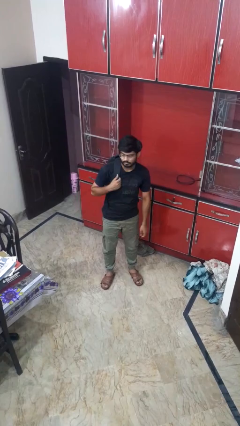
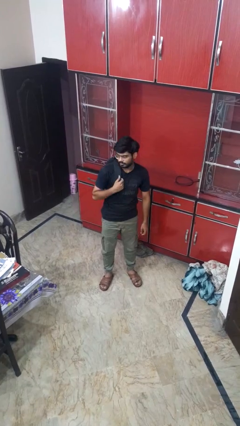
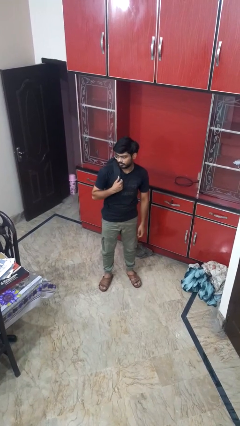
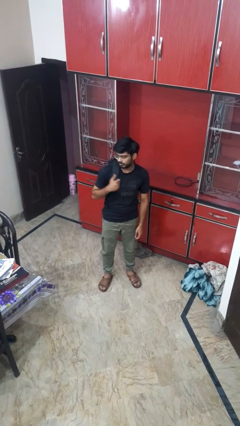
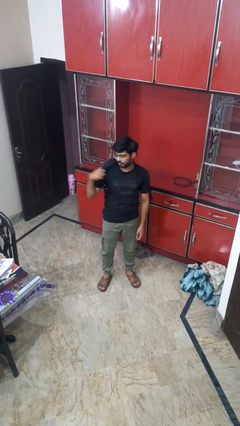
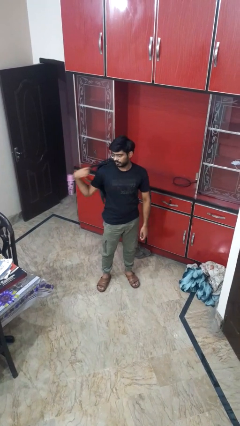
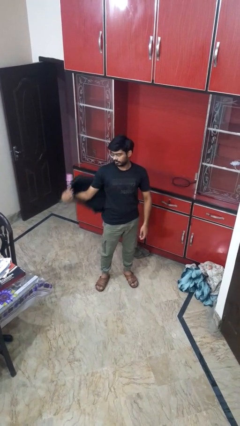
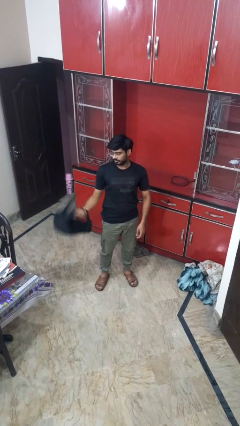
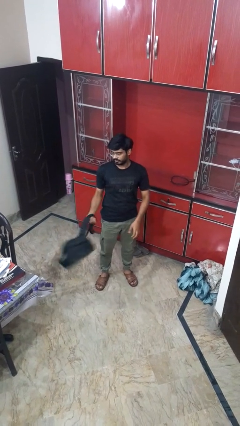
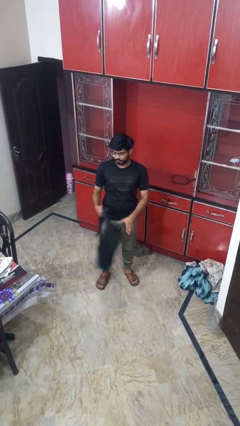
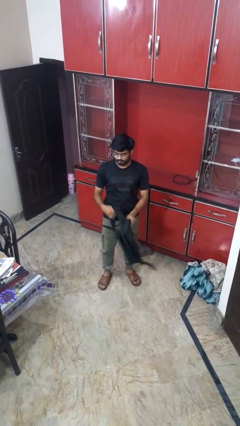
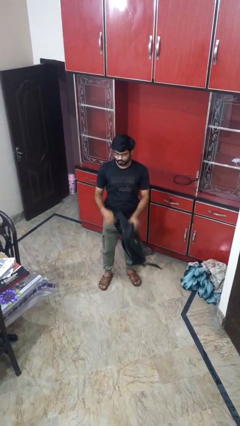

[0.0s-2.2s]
person takes off backpack

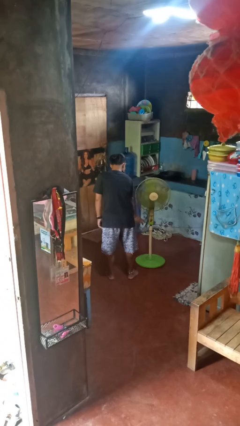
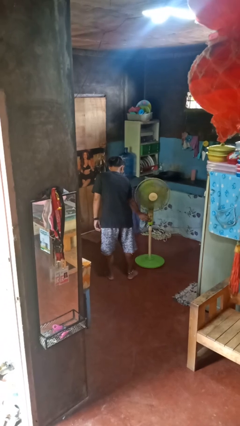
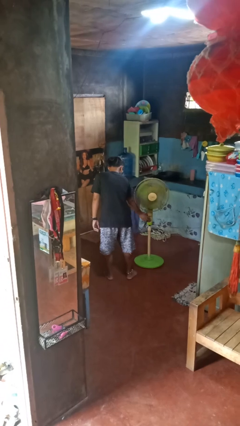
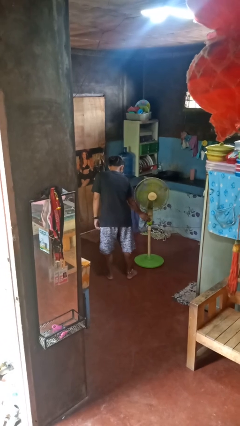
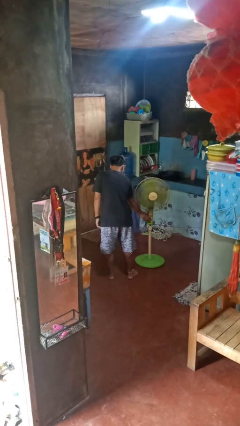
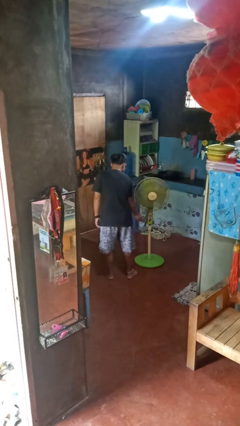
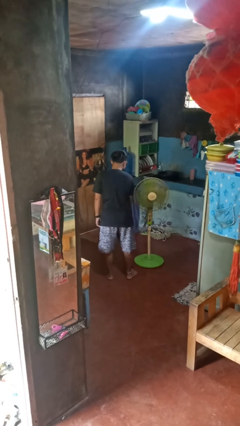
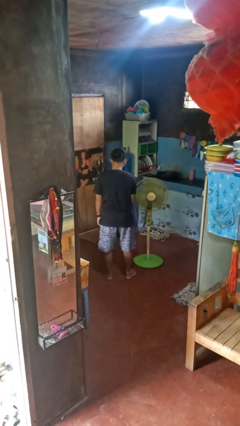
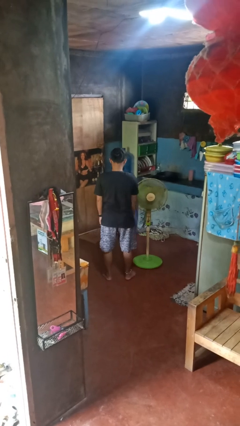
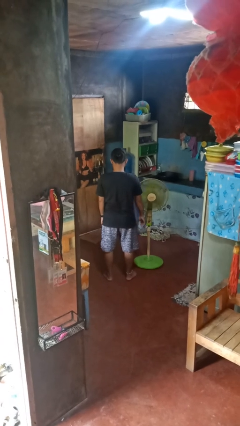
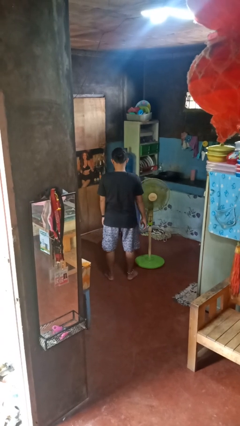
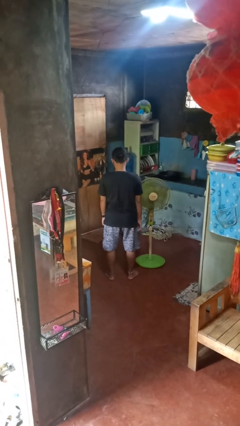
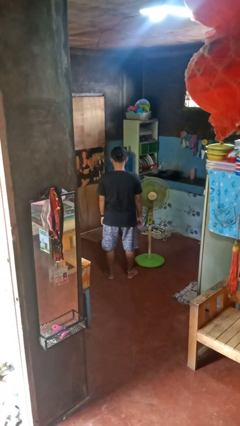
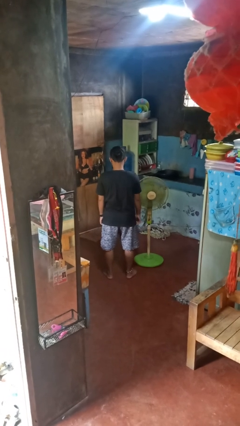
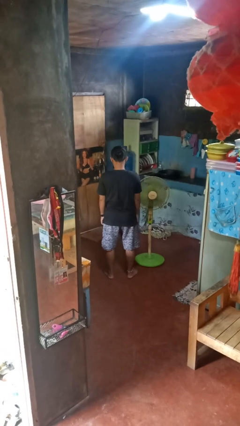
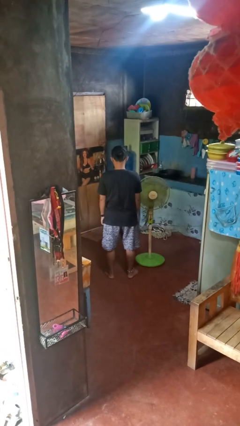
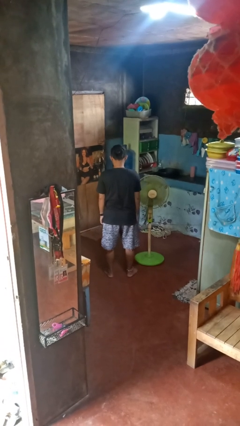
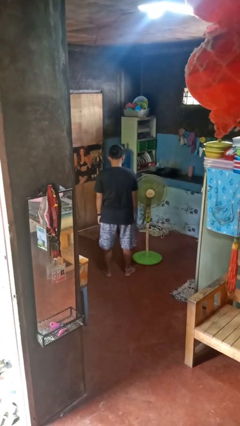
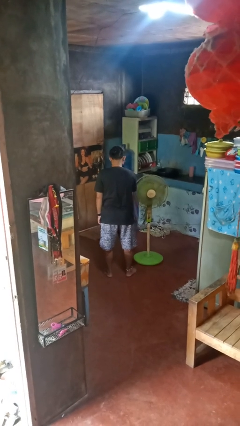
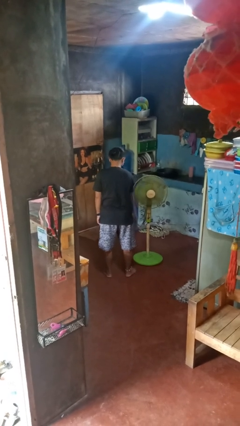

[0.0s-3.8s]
person turns on fan

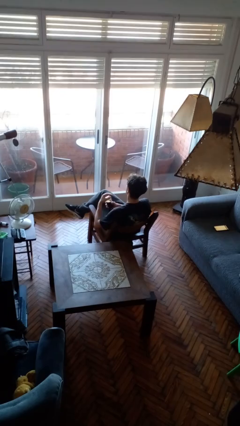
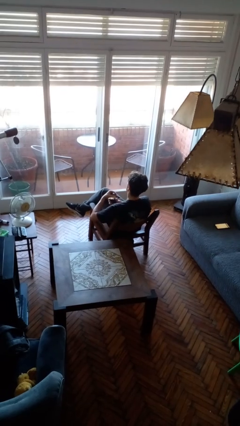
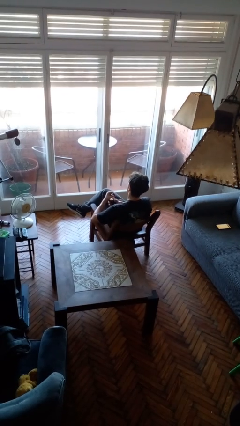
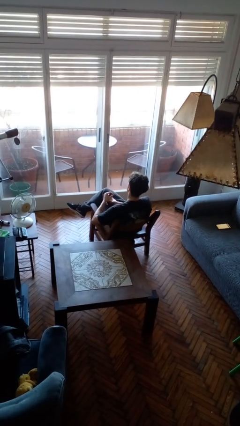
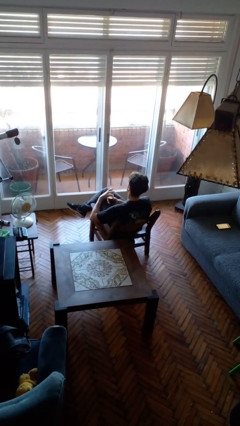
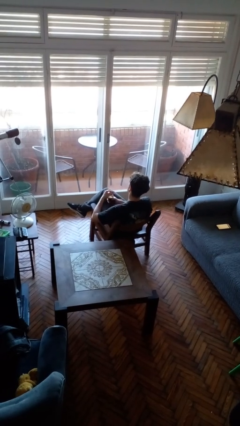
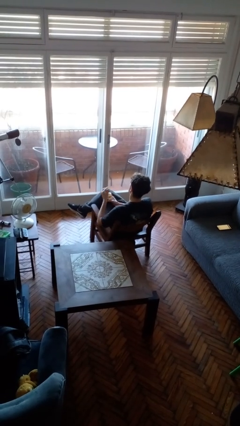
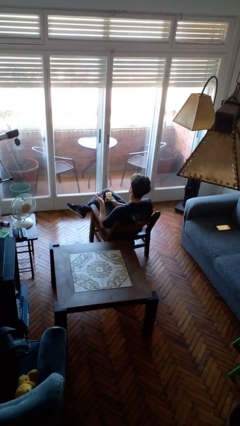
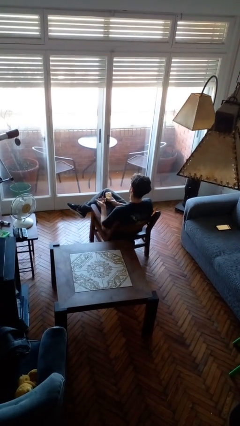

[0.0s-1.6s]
person opens jar

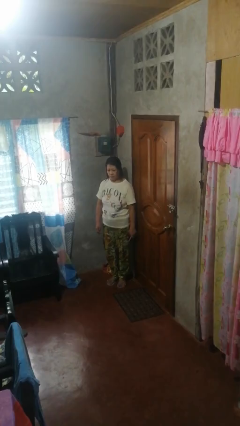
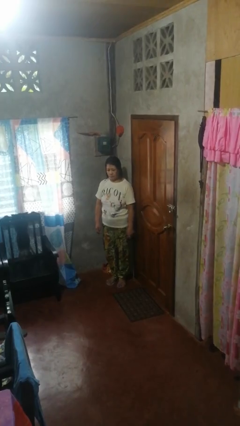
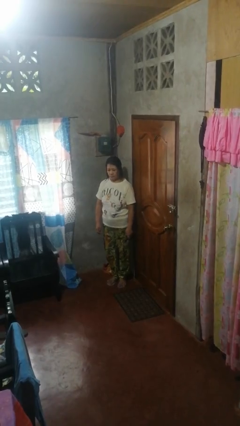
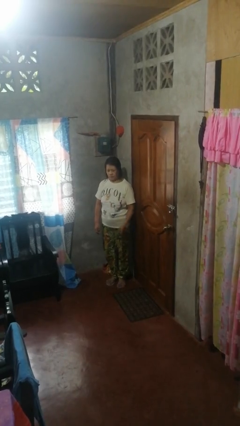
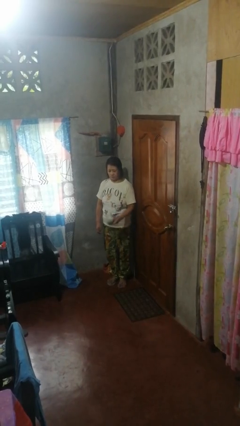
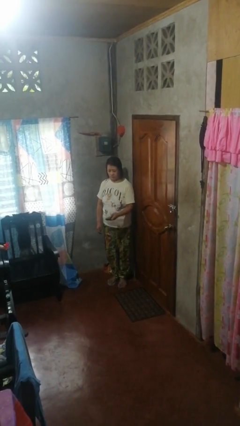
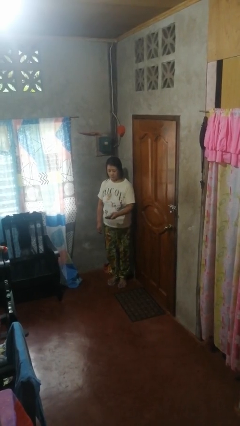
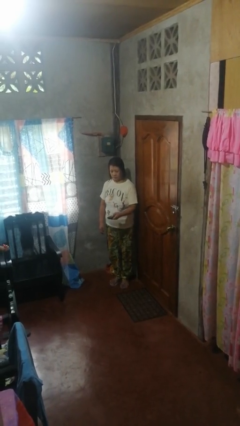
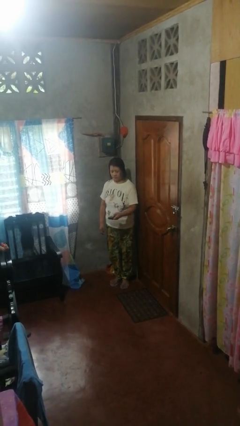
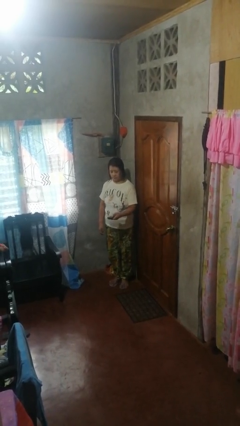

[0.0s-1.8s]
person uses television remote

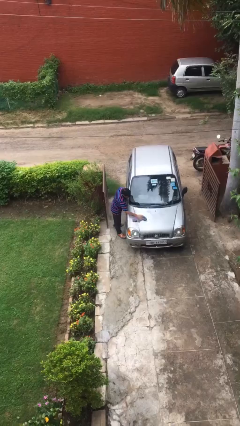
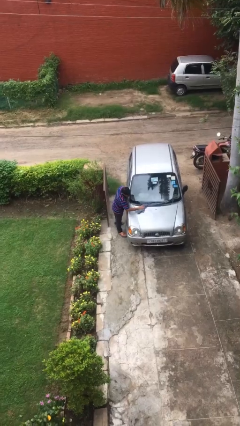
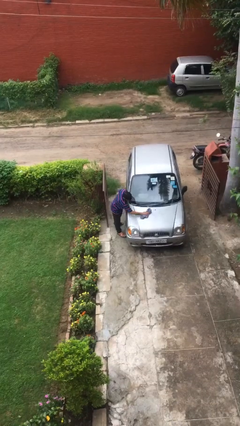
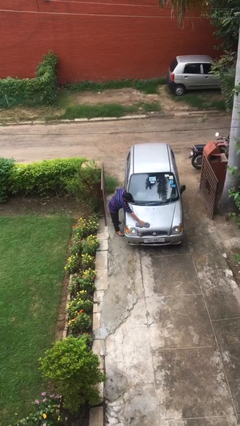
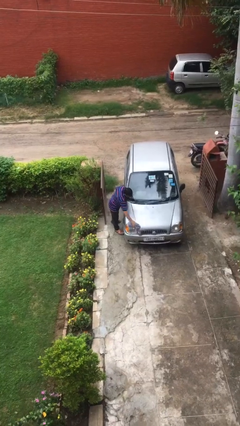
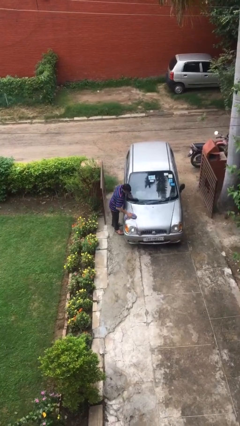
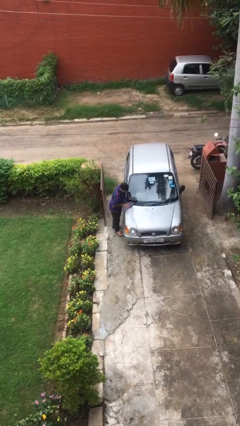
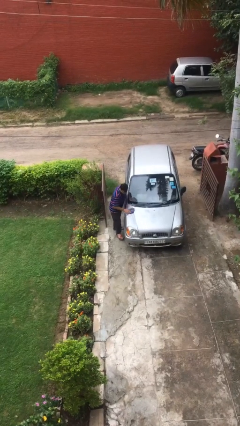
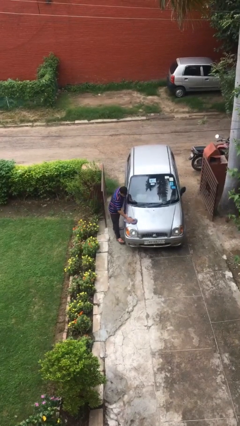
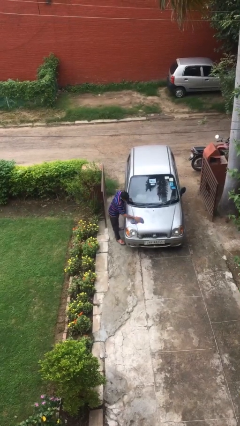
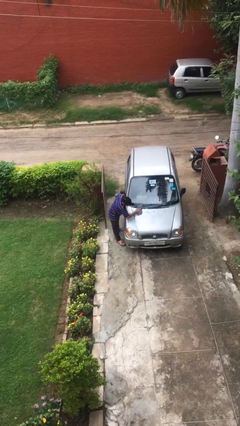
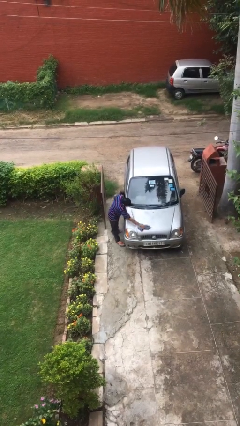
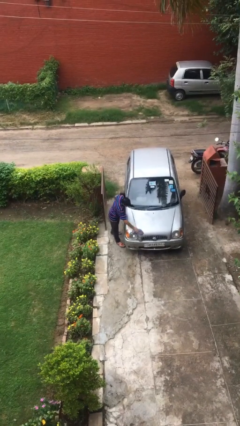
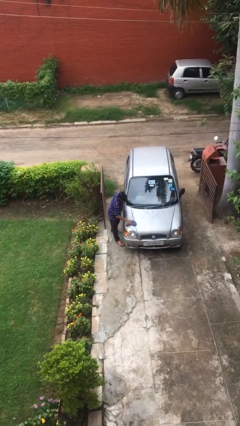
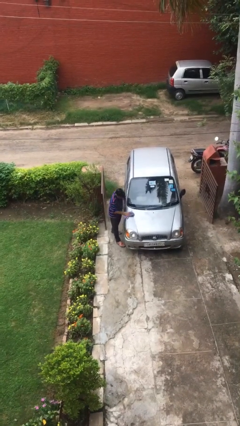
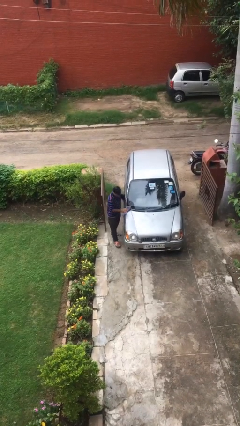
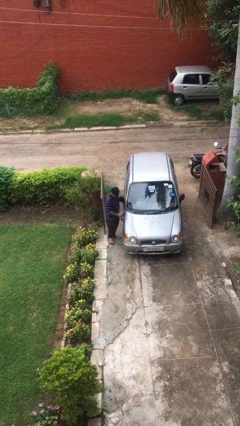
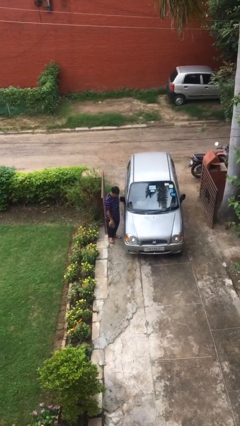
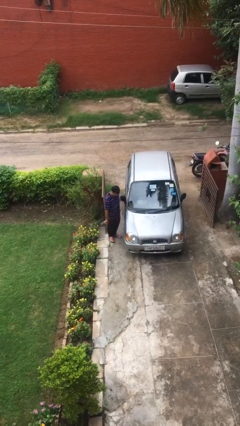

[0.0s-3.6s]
person polishes car with rag

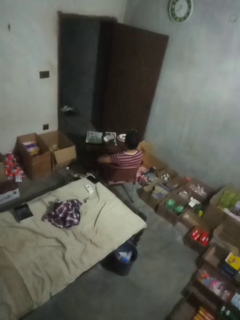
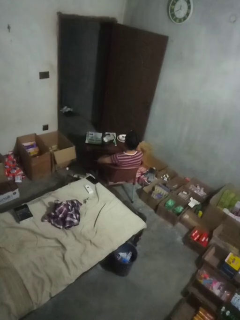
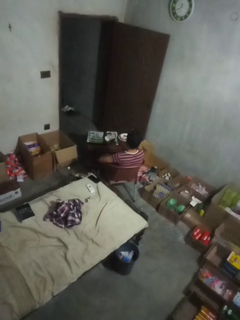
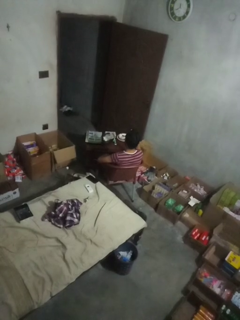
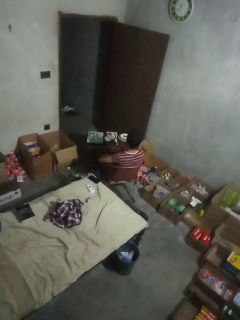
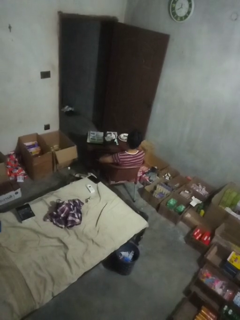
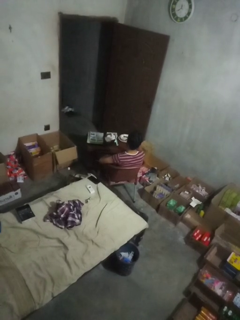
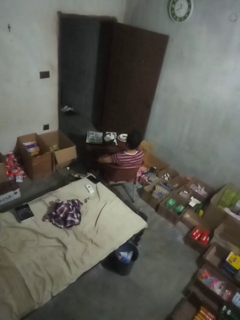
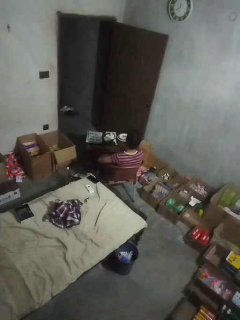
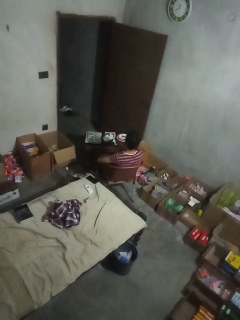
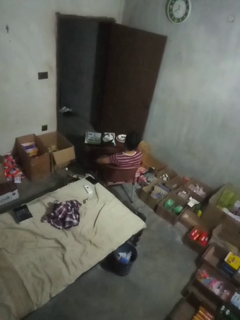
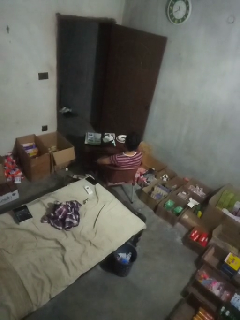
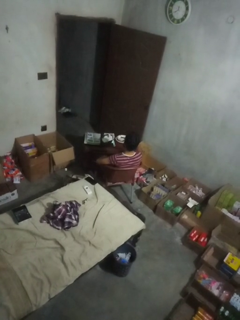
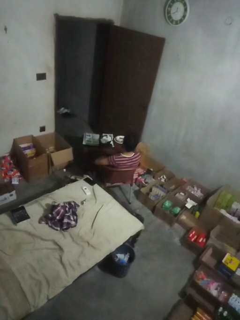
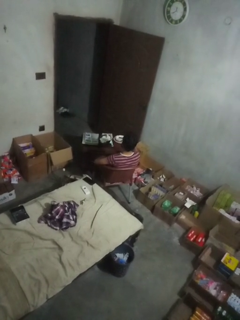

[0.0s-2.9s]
person drinks from shotglass

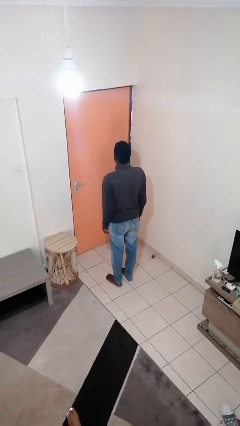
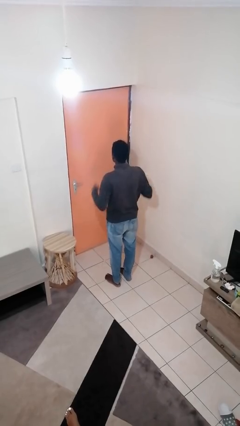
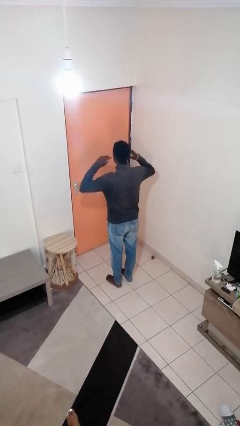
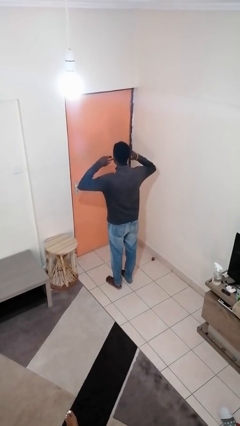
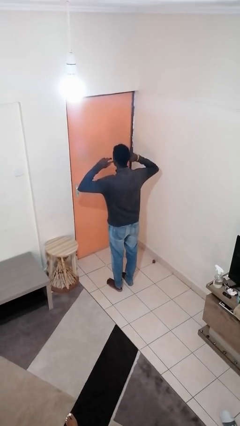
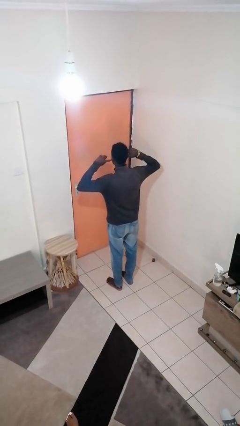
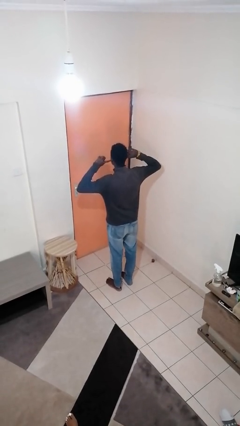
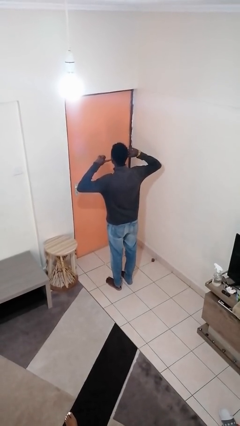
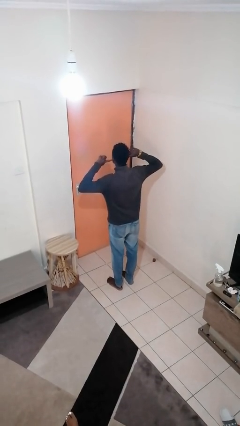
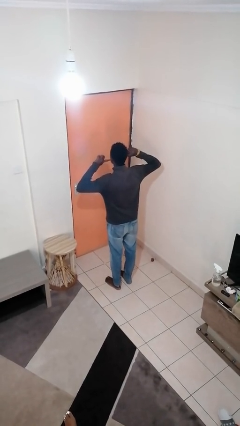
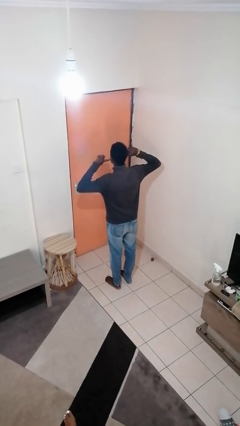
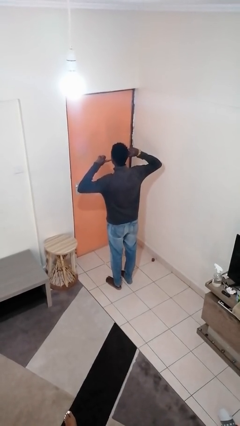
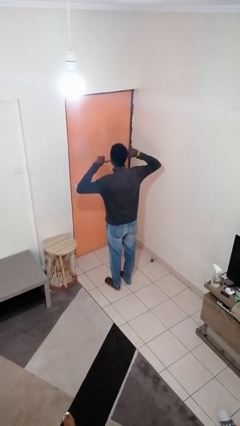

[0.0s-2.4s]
person puts fingers in ear
